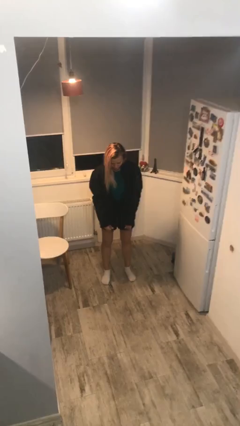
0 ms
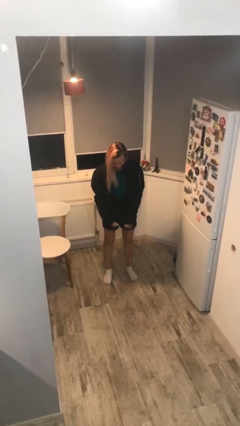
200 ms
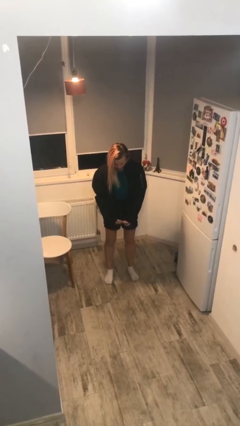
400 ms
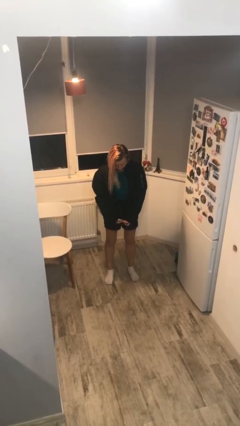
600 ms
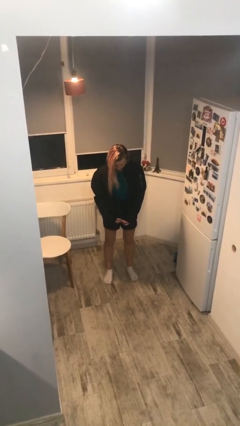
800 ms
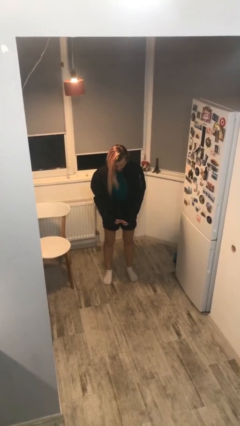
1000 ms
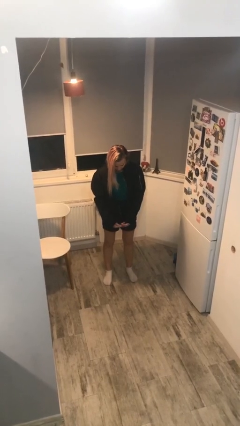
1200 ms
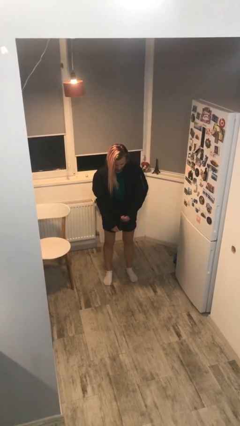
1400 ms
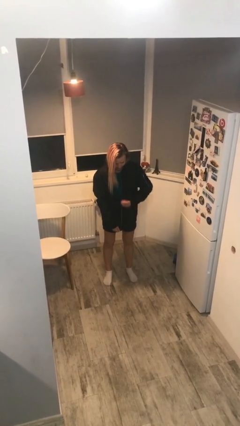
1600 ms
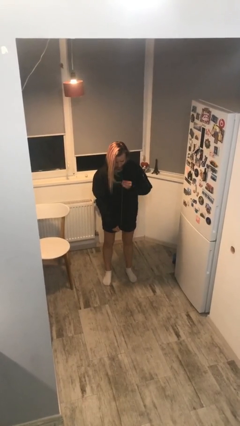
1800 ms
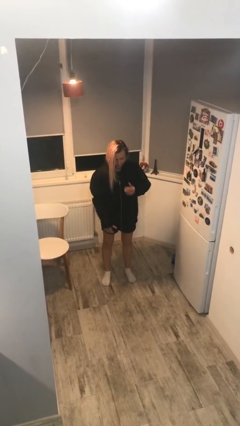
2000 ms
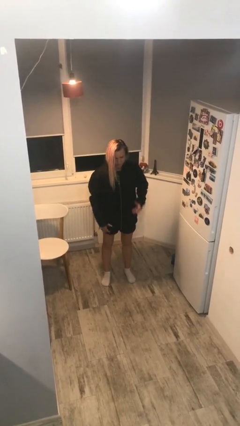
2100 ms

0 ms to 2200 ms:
person zips up jacket

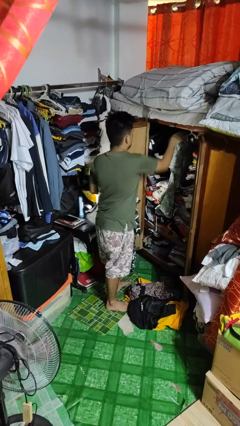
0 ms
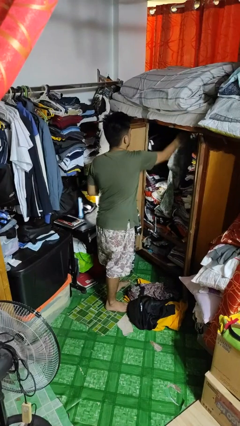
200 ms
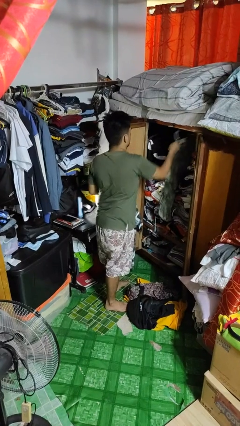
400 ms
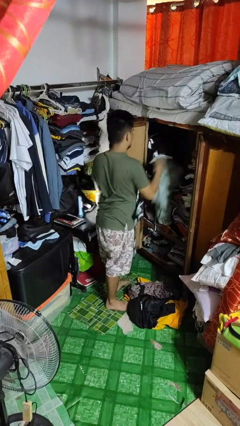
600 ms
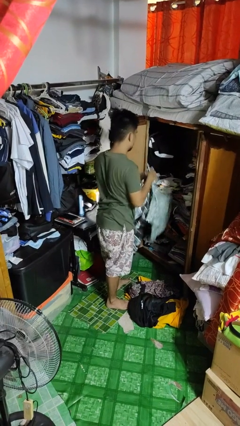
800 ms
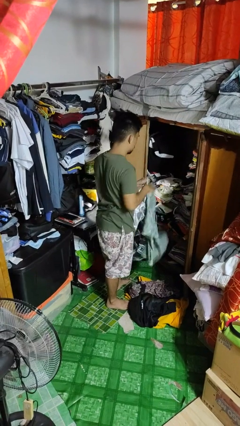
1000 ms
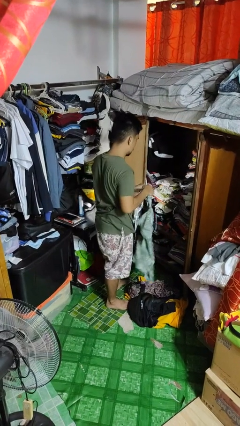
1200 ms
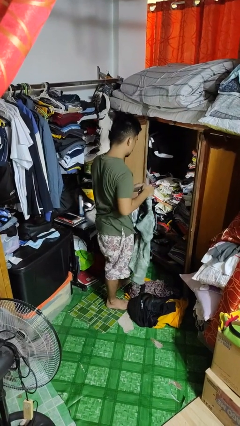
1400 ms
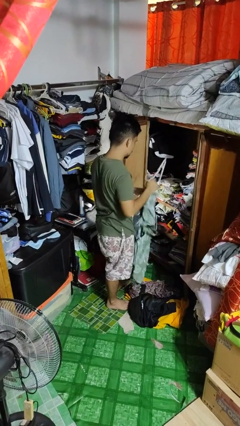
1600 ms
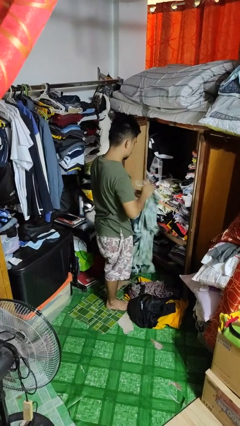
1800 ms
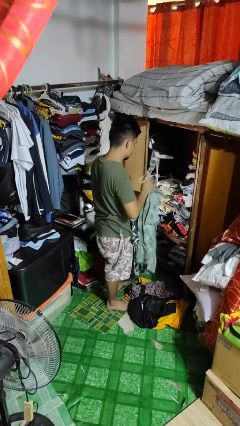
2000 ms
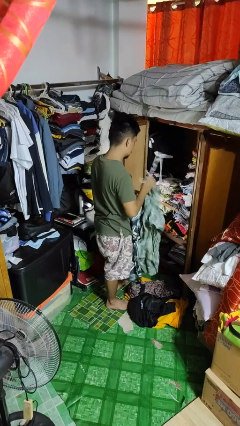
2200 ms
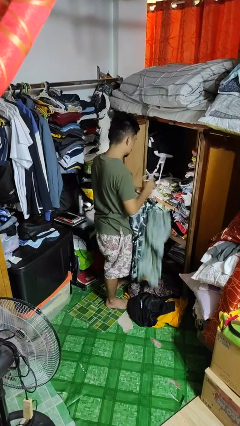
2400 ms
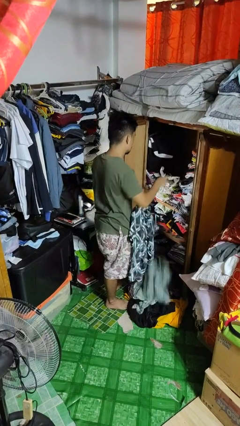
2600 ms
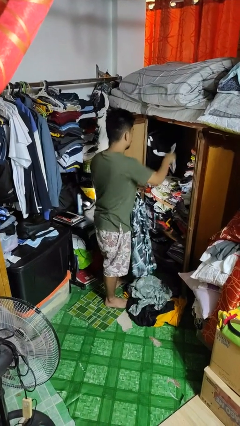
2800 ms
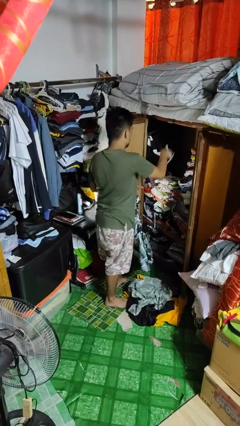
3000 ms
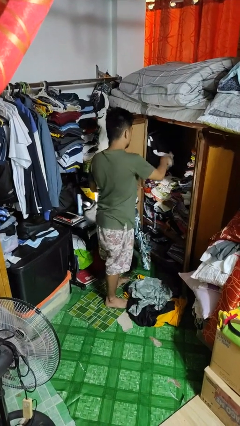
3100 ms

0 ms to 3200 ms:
person takes clothes from closet

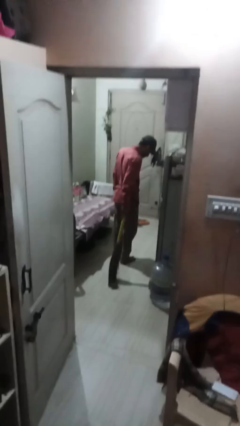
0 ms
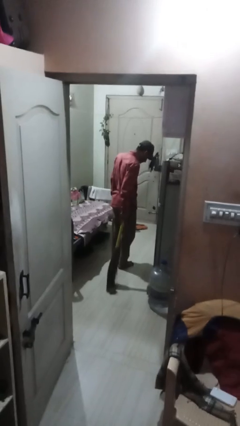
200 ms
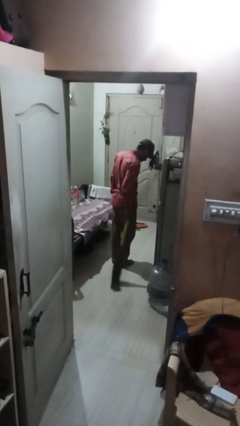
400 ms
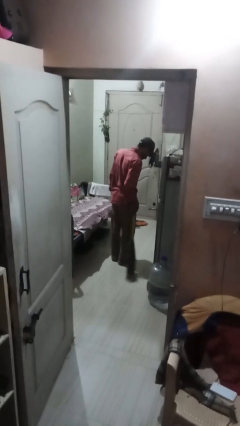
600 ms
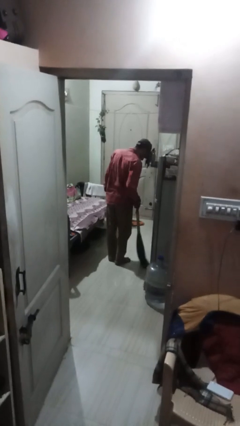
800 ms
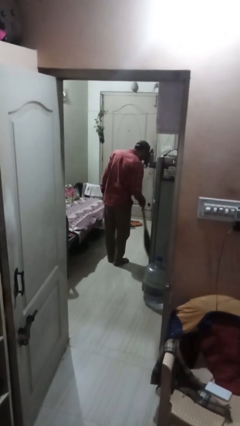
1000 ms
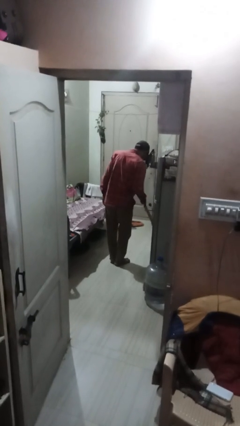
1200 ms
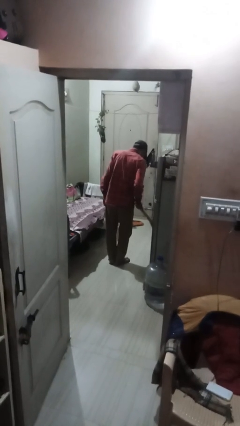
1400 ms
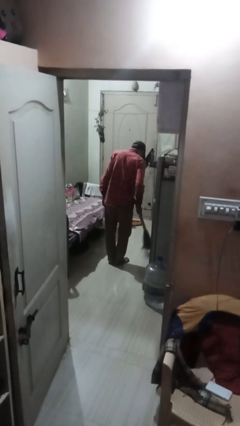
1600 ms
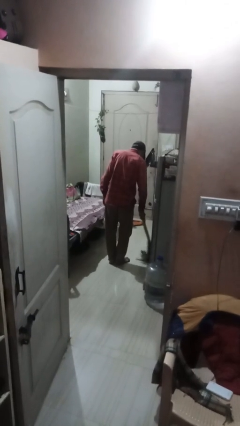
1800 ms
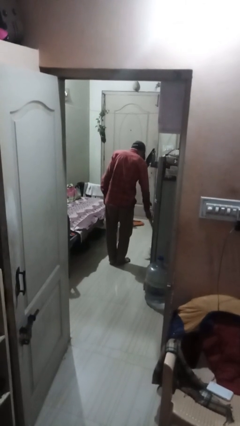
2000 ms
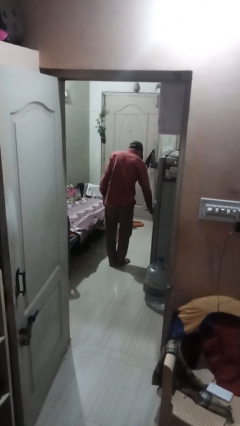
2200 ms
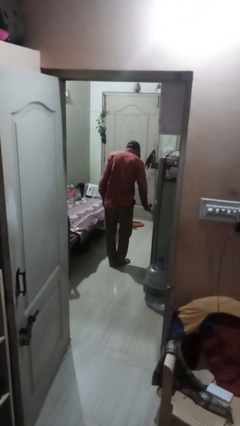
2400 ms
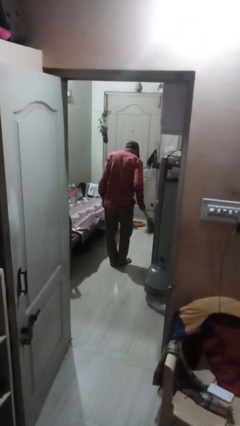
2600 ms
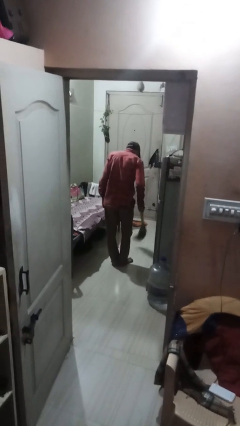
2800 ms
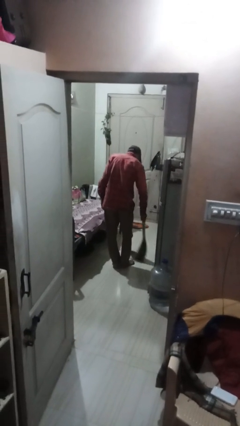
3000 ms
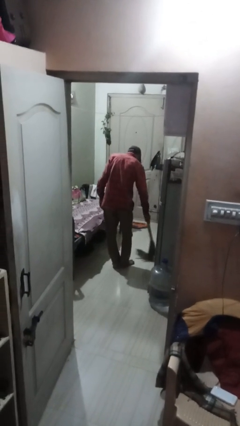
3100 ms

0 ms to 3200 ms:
person sweeps floor

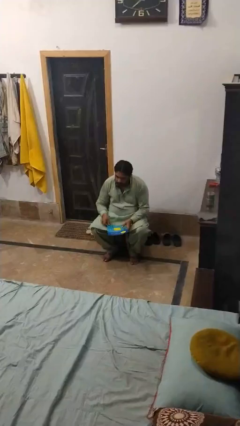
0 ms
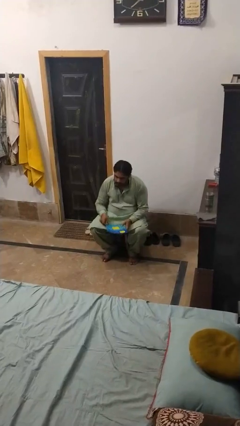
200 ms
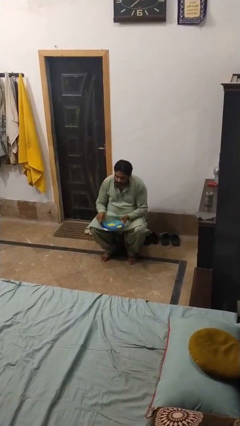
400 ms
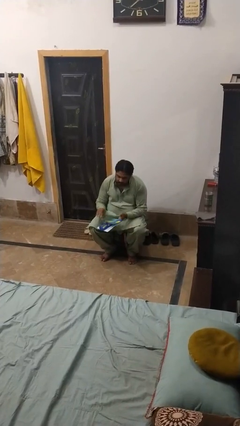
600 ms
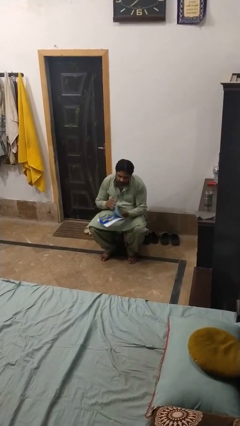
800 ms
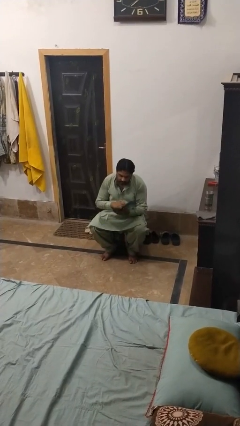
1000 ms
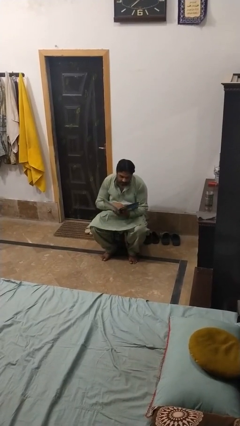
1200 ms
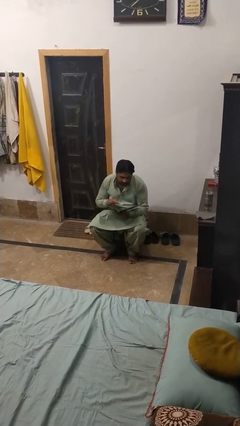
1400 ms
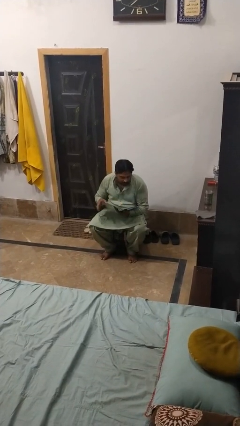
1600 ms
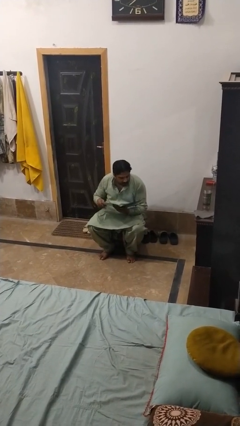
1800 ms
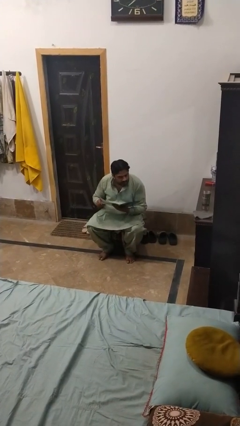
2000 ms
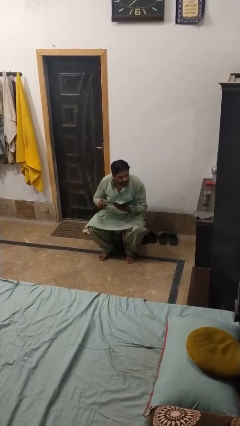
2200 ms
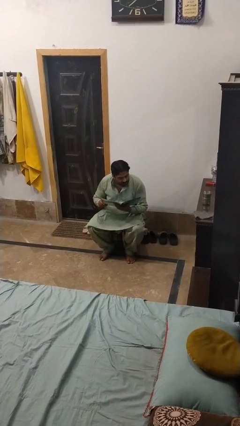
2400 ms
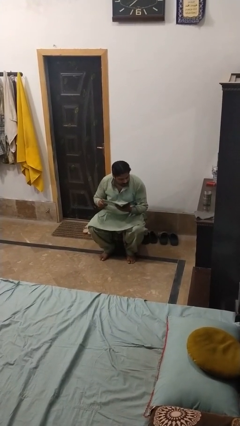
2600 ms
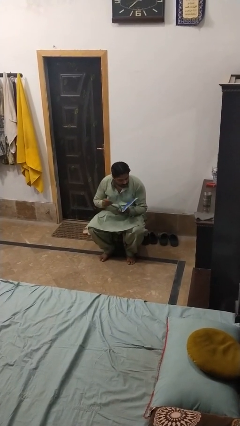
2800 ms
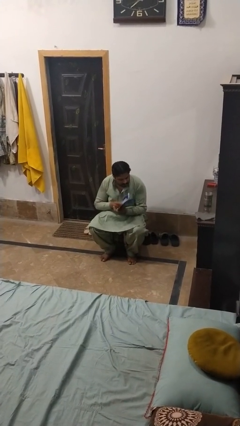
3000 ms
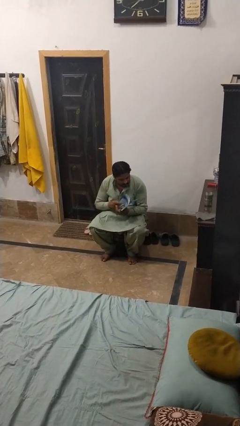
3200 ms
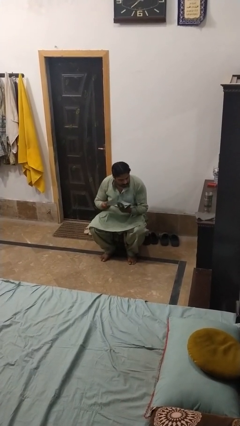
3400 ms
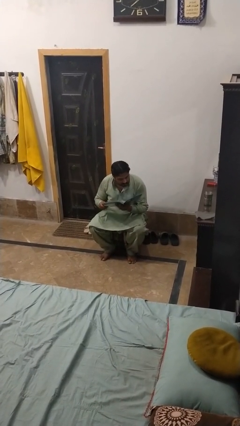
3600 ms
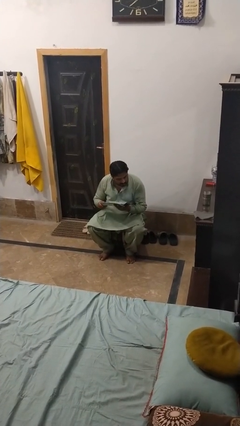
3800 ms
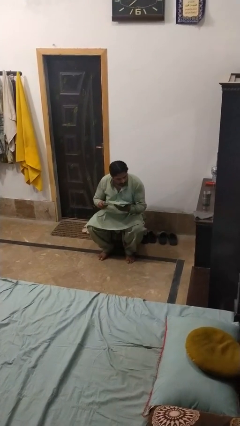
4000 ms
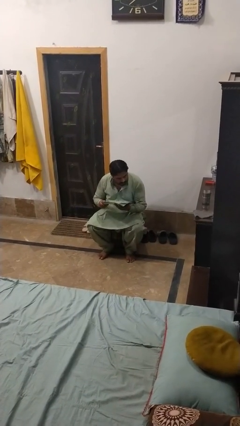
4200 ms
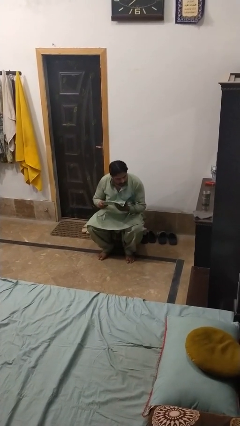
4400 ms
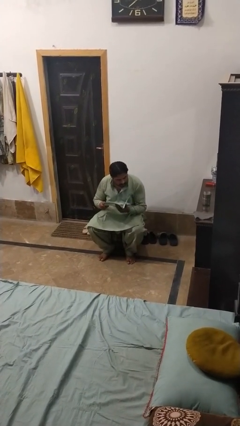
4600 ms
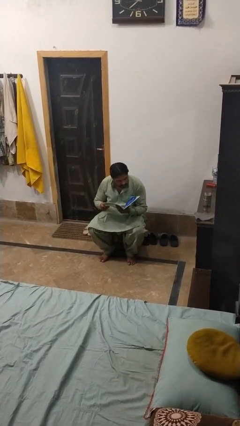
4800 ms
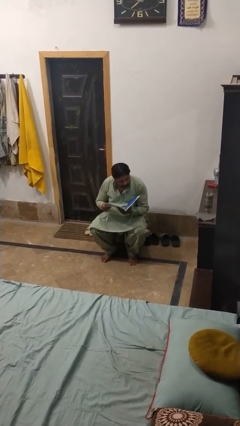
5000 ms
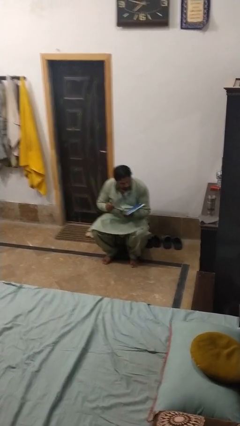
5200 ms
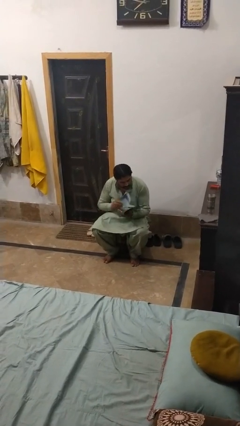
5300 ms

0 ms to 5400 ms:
person reads magazine

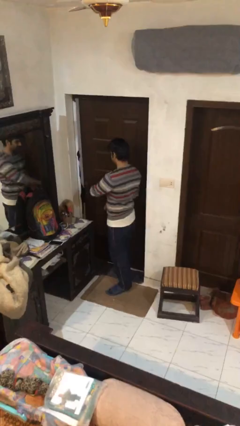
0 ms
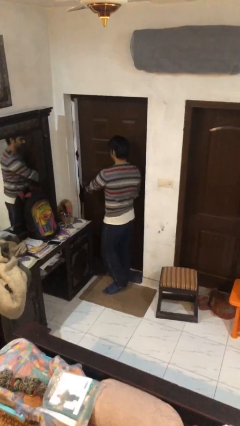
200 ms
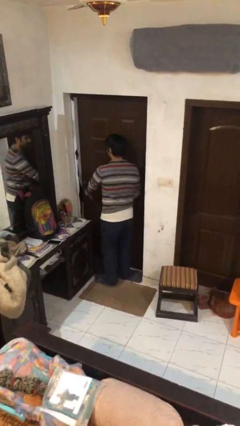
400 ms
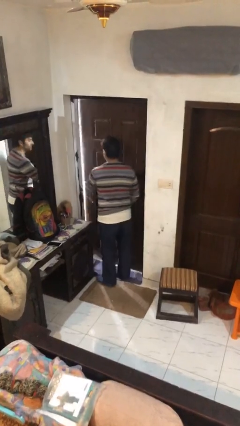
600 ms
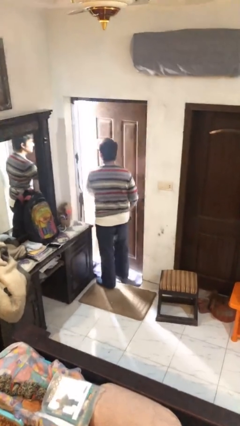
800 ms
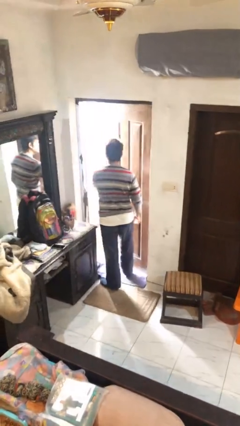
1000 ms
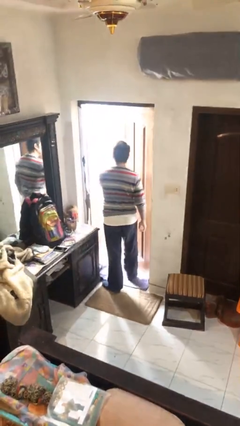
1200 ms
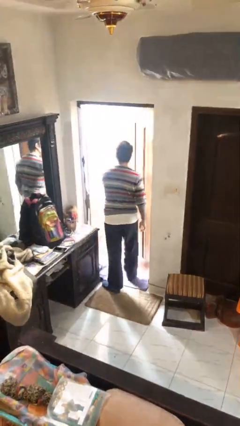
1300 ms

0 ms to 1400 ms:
person opens facility door

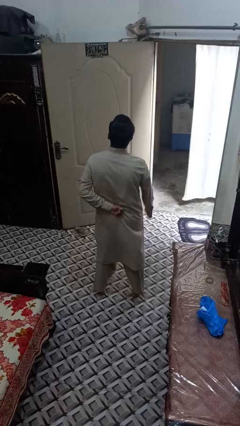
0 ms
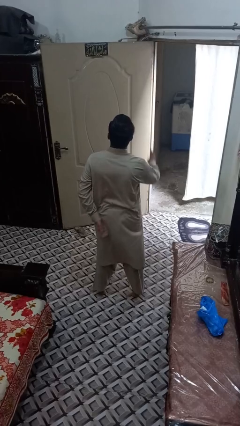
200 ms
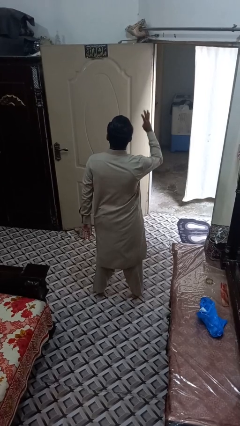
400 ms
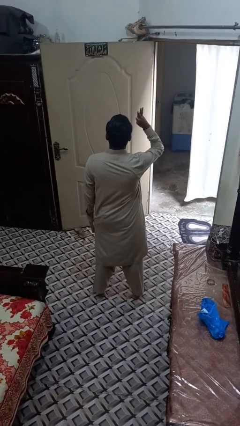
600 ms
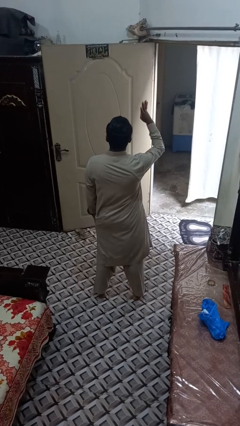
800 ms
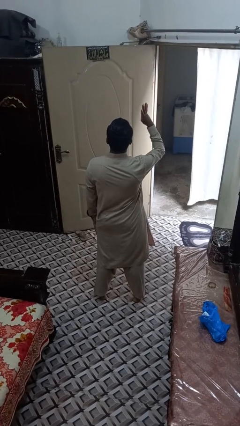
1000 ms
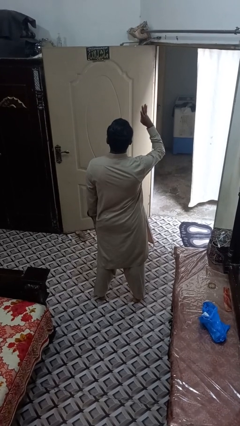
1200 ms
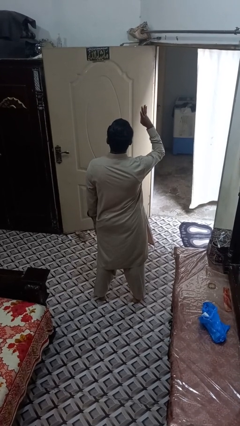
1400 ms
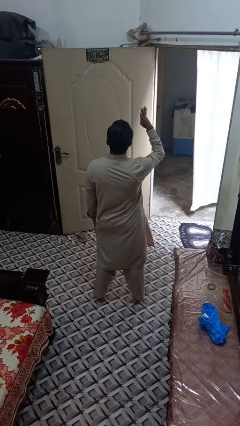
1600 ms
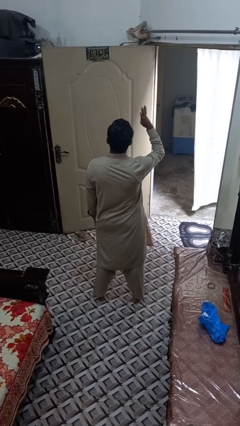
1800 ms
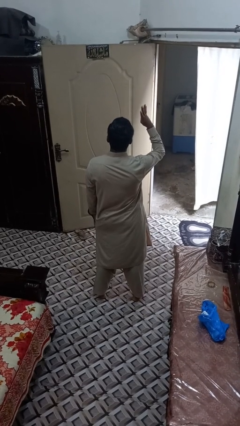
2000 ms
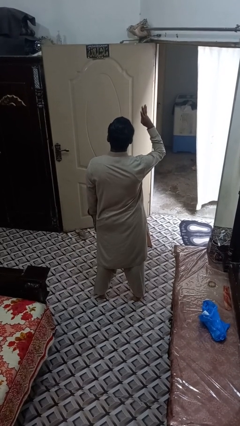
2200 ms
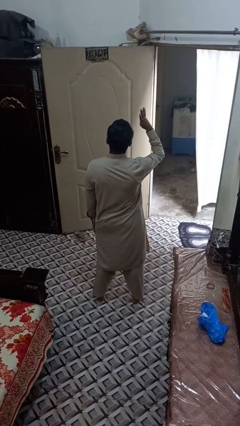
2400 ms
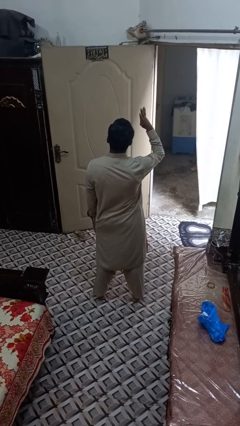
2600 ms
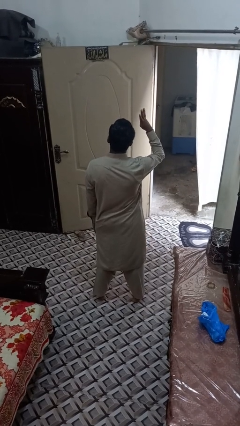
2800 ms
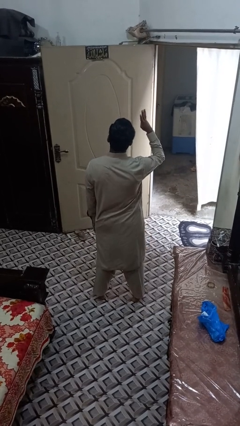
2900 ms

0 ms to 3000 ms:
person gestures number four
